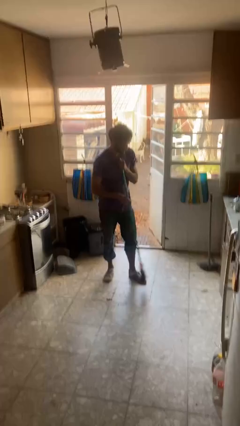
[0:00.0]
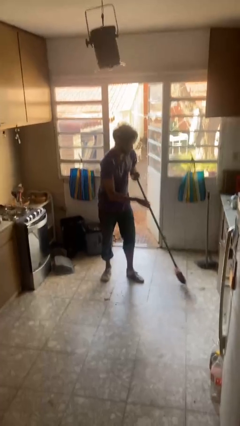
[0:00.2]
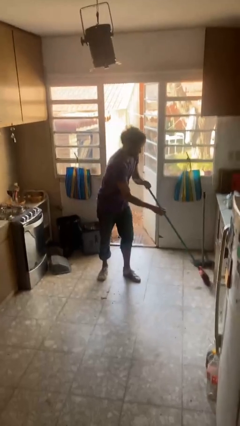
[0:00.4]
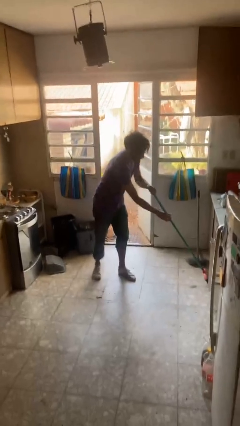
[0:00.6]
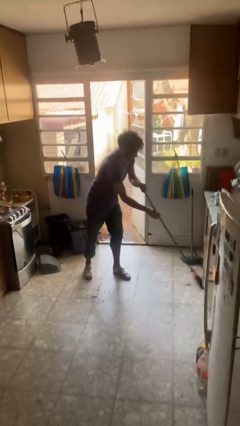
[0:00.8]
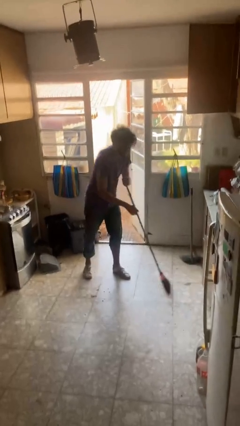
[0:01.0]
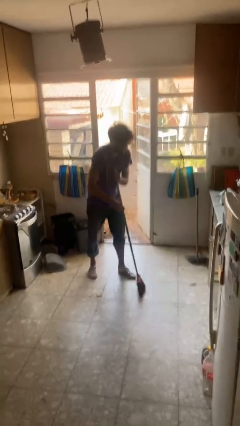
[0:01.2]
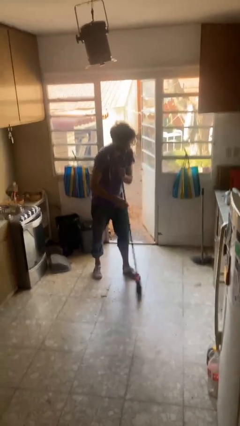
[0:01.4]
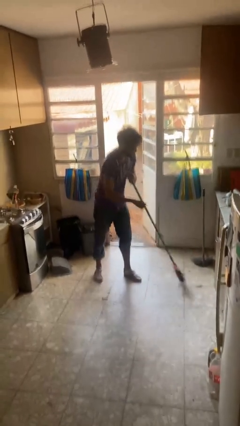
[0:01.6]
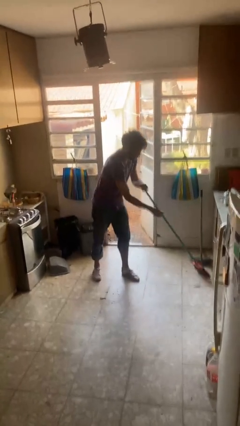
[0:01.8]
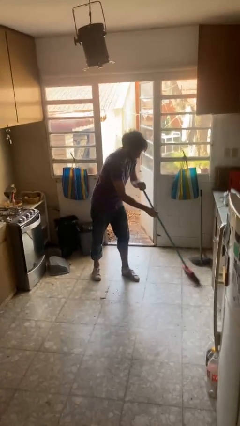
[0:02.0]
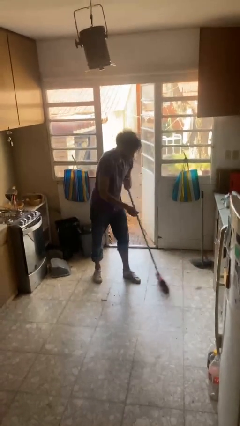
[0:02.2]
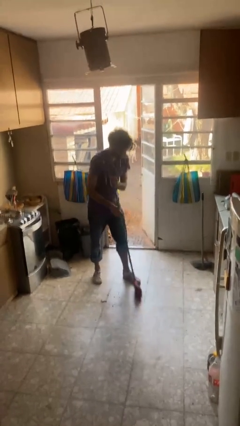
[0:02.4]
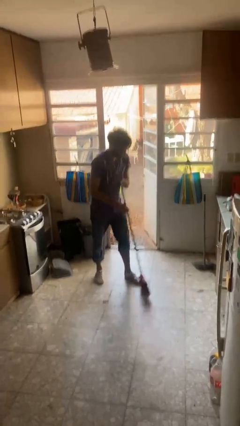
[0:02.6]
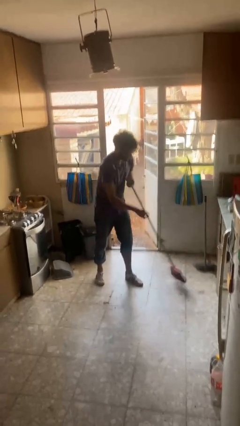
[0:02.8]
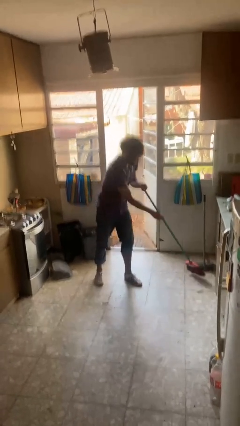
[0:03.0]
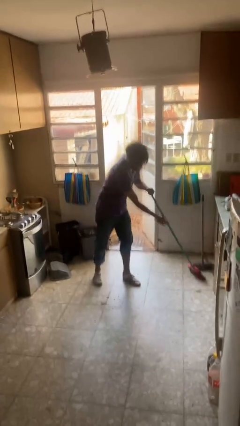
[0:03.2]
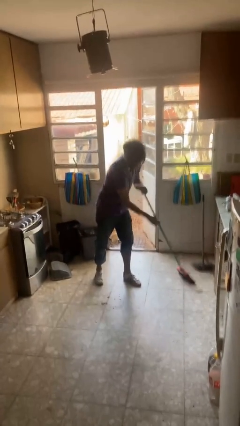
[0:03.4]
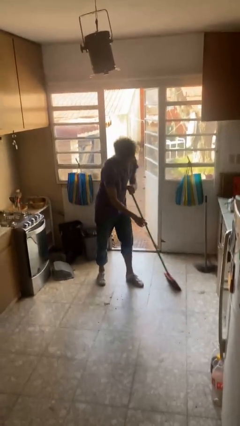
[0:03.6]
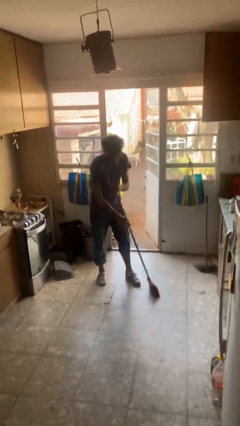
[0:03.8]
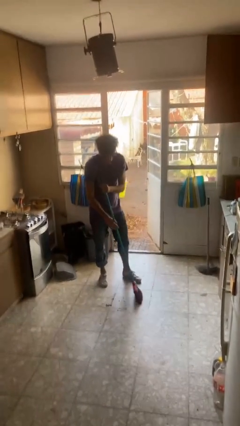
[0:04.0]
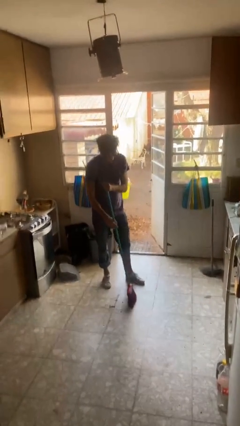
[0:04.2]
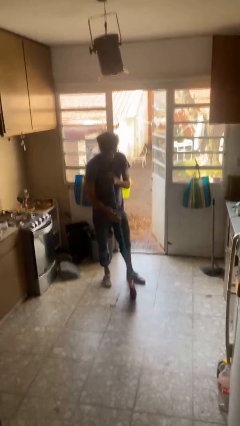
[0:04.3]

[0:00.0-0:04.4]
person sweeps floor

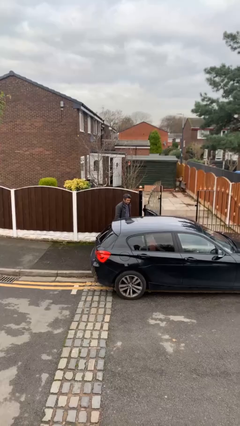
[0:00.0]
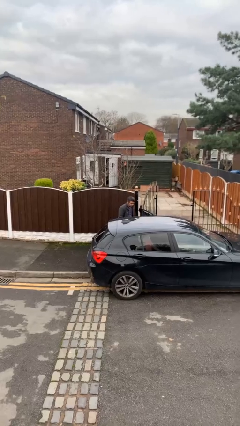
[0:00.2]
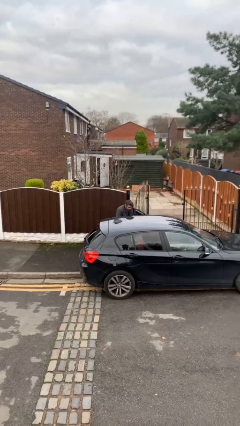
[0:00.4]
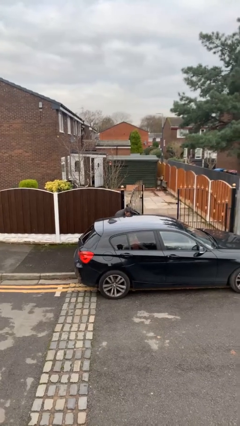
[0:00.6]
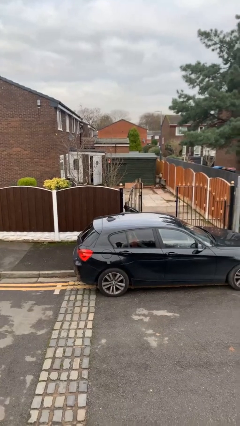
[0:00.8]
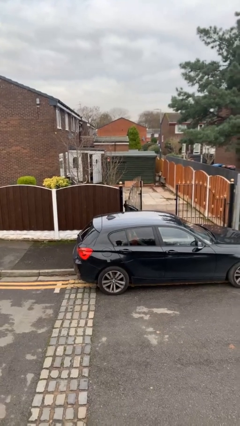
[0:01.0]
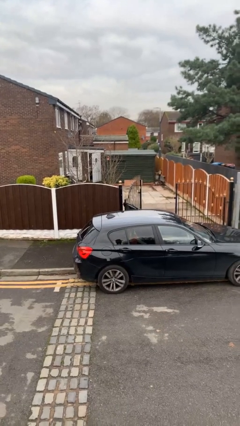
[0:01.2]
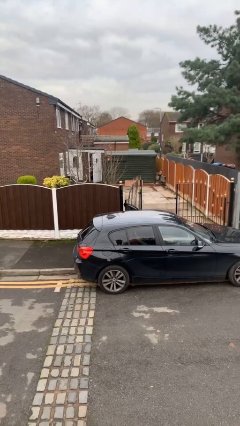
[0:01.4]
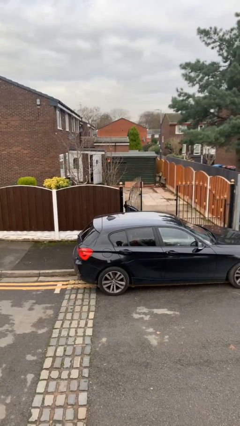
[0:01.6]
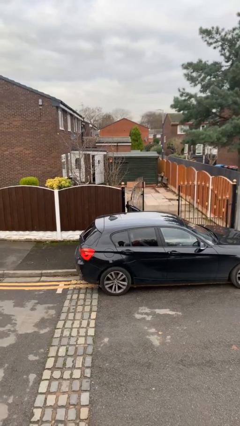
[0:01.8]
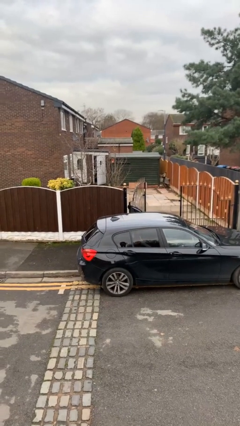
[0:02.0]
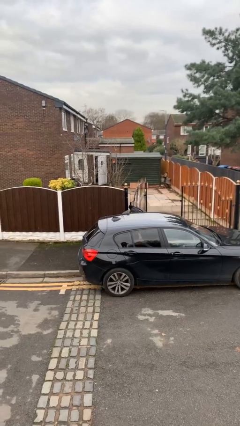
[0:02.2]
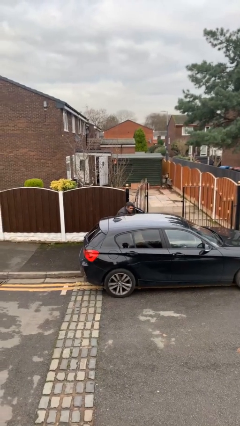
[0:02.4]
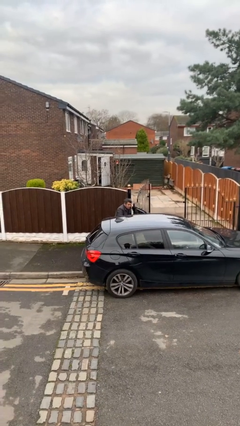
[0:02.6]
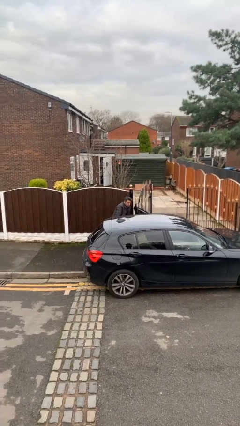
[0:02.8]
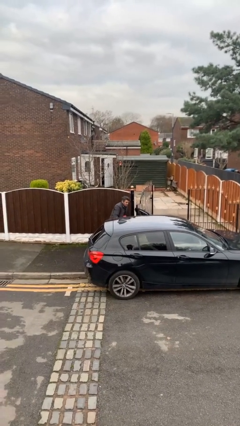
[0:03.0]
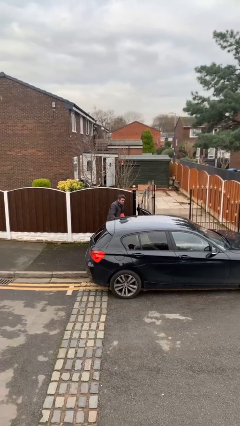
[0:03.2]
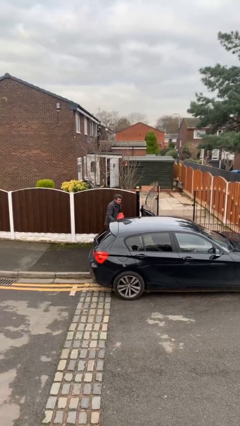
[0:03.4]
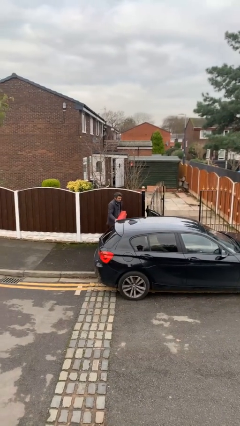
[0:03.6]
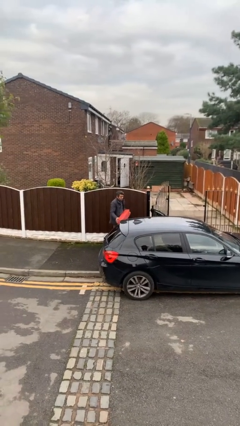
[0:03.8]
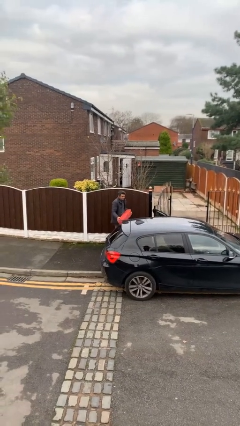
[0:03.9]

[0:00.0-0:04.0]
person unloads car

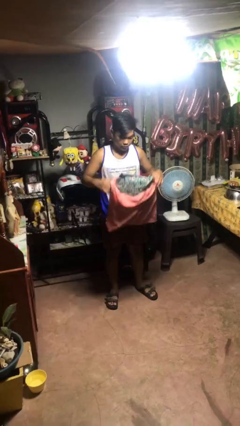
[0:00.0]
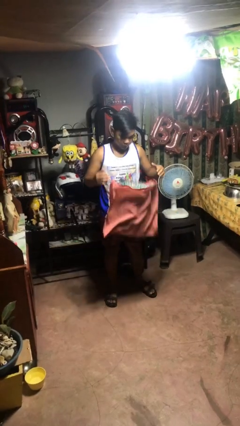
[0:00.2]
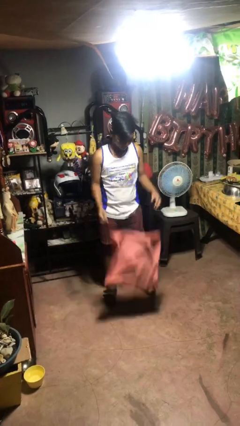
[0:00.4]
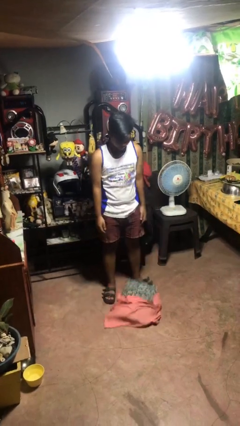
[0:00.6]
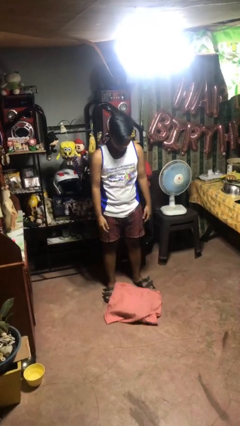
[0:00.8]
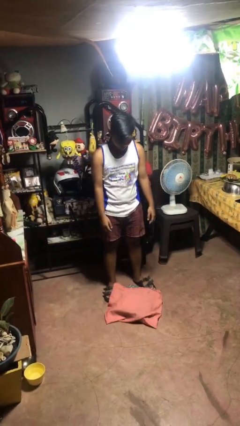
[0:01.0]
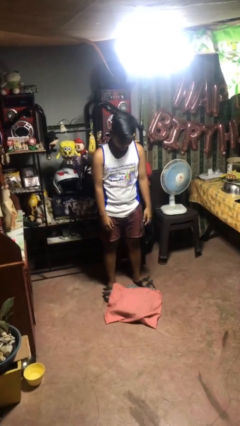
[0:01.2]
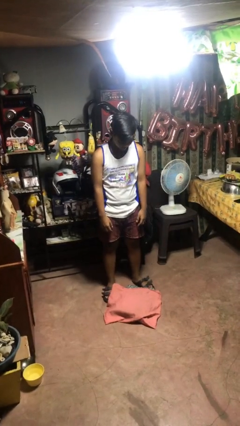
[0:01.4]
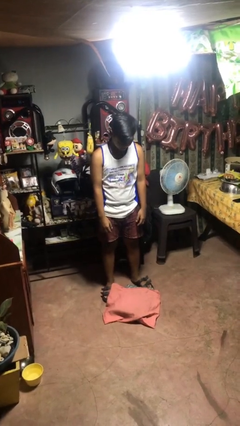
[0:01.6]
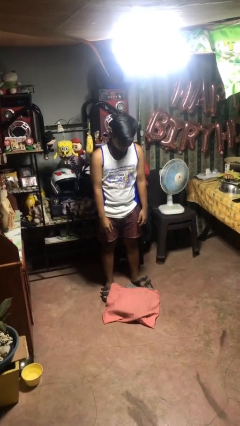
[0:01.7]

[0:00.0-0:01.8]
person drops object

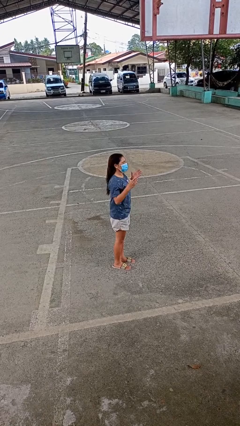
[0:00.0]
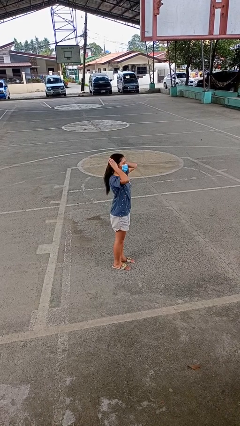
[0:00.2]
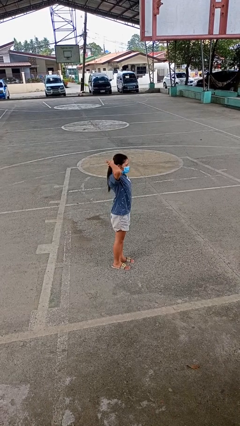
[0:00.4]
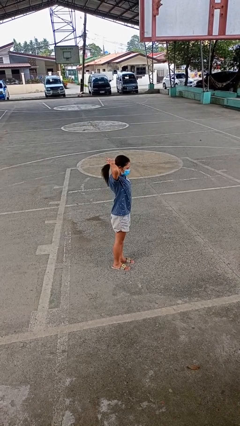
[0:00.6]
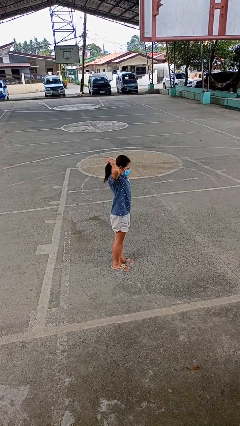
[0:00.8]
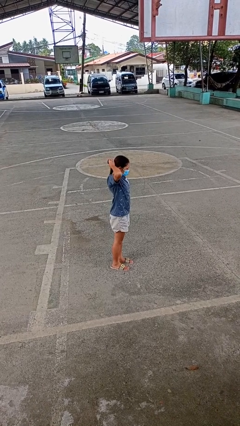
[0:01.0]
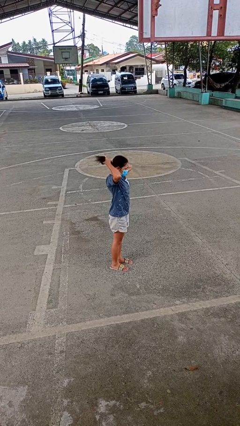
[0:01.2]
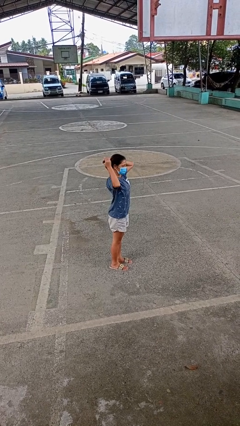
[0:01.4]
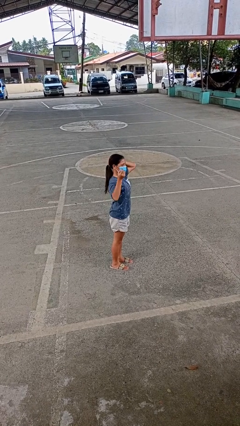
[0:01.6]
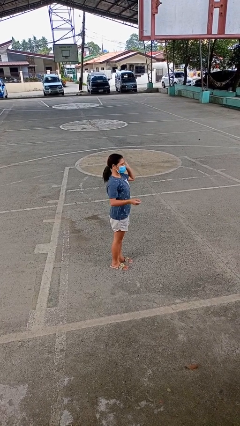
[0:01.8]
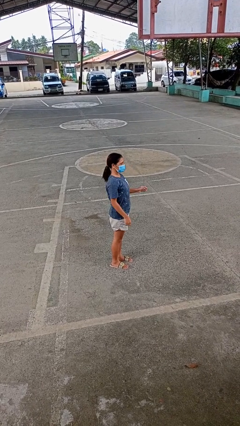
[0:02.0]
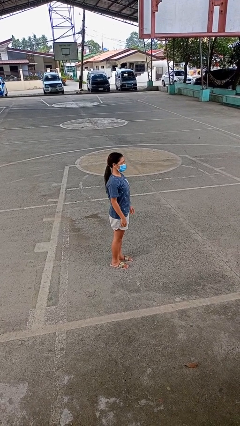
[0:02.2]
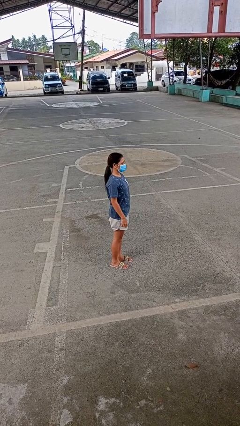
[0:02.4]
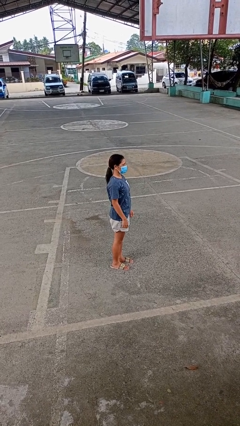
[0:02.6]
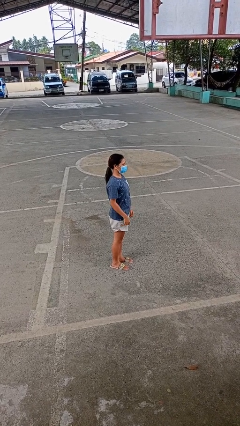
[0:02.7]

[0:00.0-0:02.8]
person puts hair in ponytail

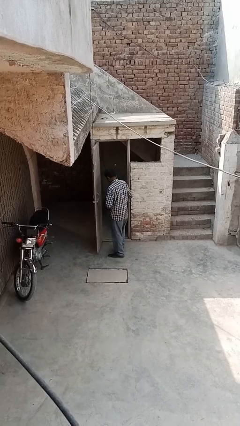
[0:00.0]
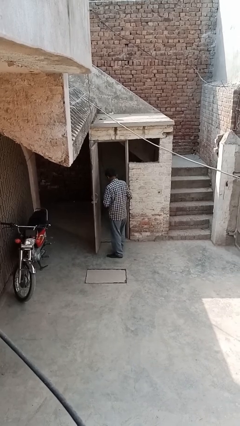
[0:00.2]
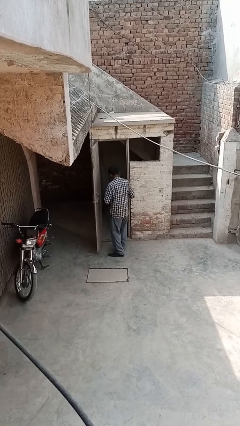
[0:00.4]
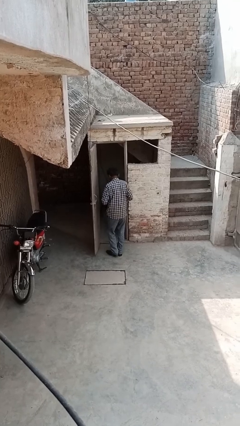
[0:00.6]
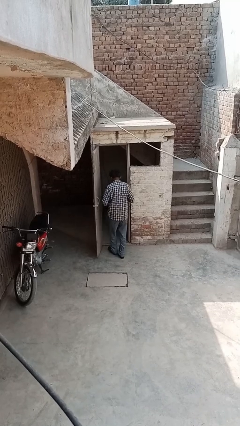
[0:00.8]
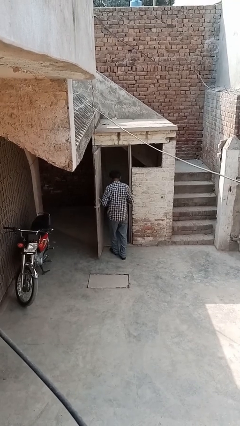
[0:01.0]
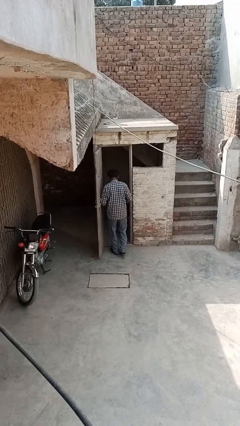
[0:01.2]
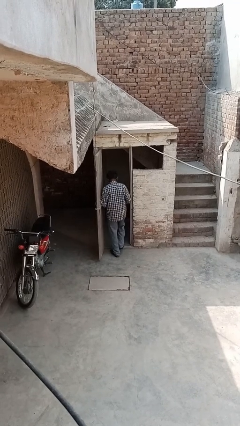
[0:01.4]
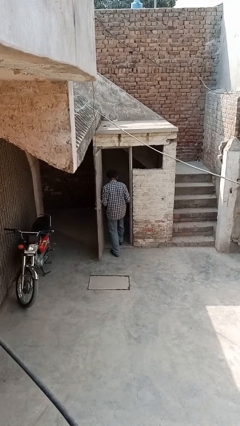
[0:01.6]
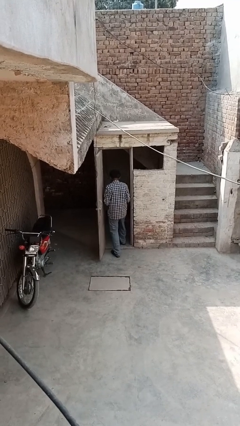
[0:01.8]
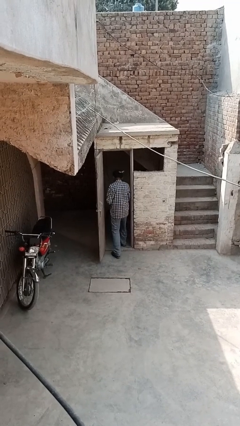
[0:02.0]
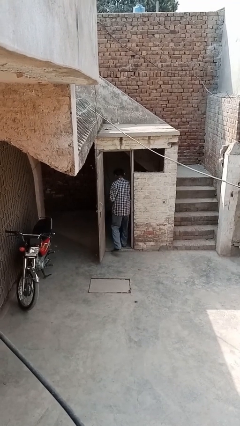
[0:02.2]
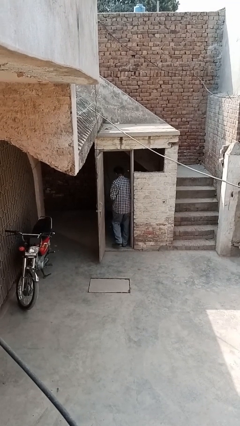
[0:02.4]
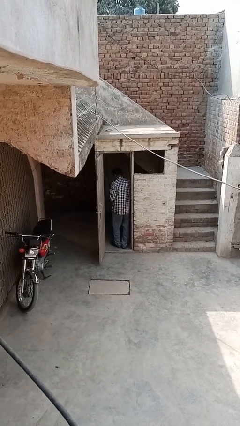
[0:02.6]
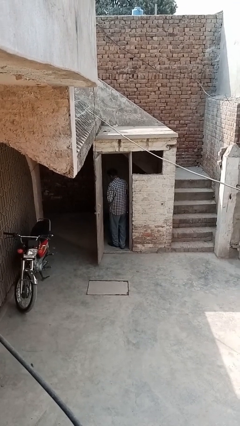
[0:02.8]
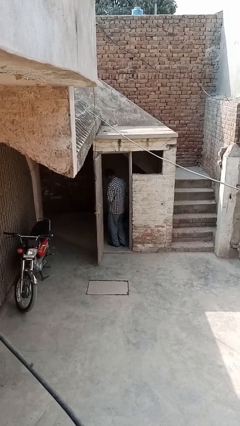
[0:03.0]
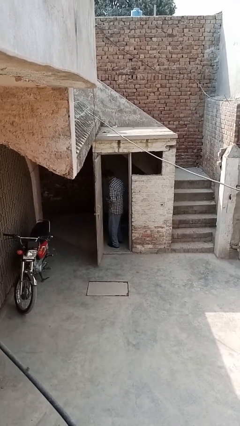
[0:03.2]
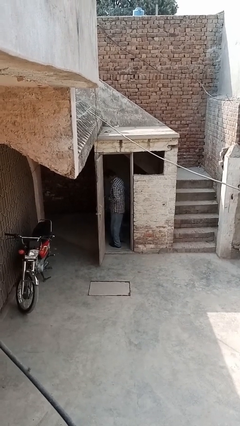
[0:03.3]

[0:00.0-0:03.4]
person exits scene through structure

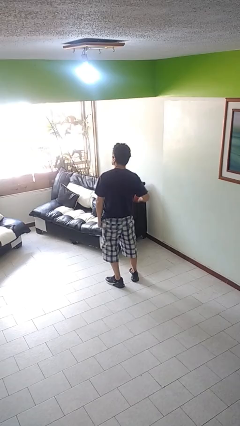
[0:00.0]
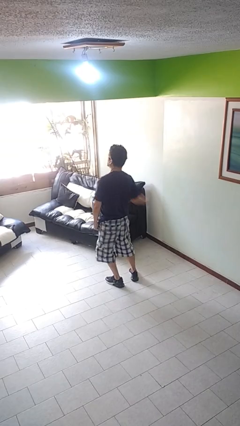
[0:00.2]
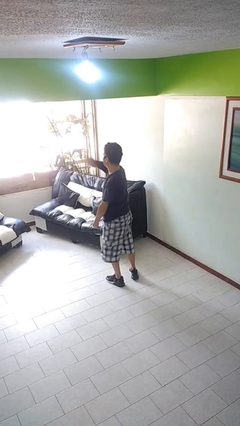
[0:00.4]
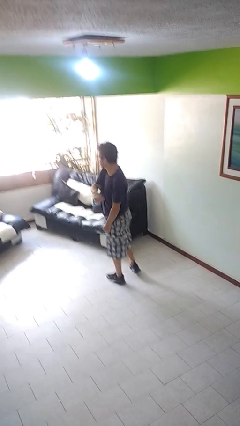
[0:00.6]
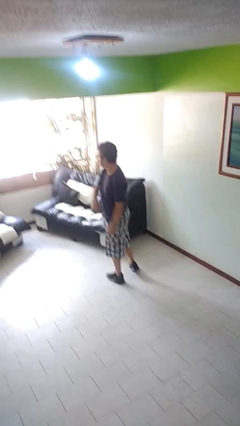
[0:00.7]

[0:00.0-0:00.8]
person punches

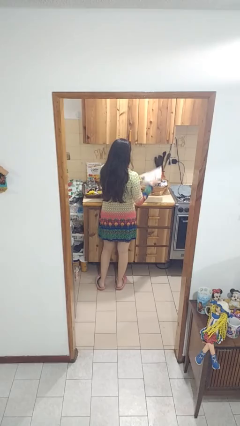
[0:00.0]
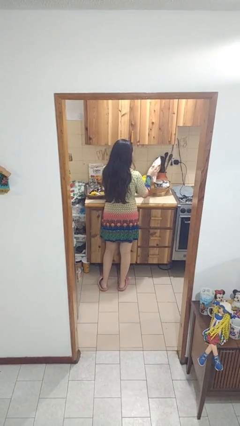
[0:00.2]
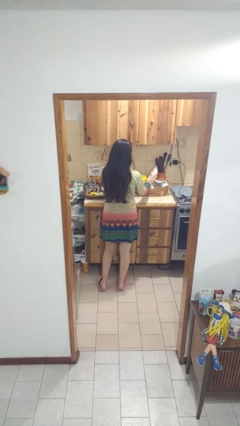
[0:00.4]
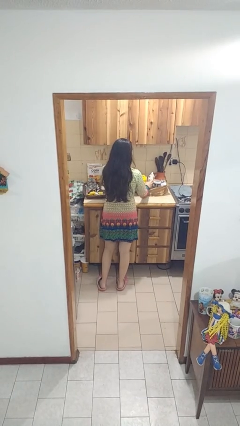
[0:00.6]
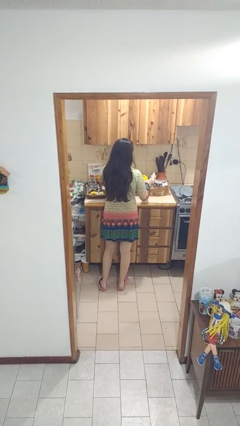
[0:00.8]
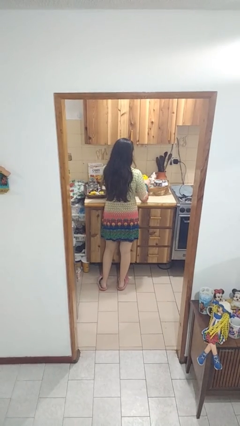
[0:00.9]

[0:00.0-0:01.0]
person puts object into bag
